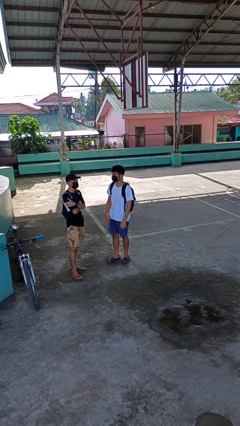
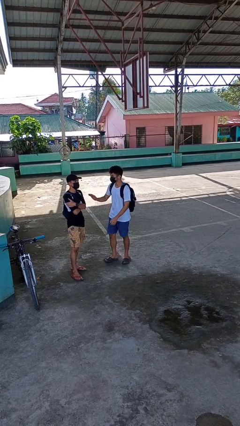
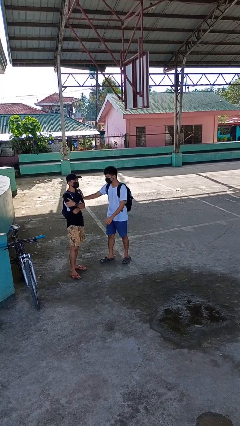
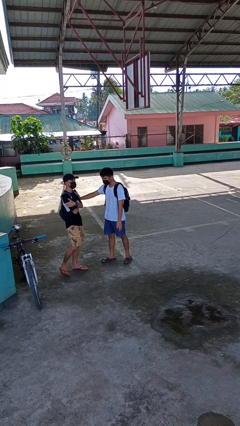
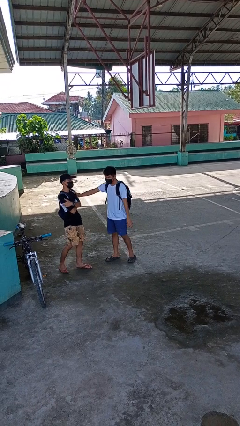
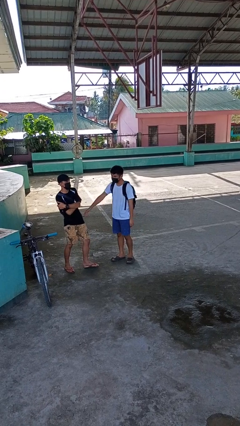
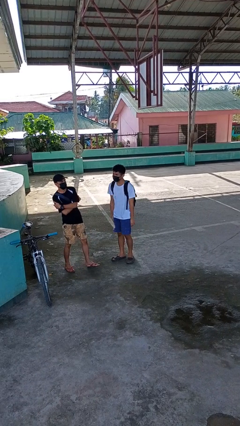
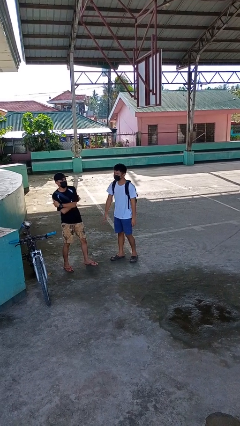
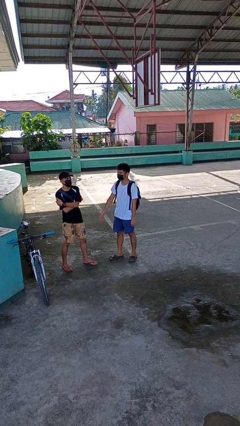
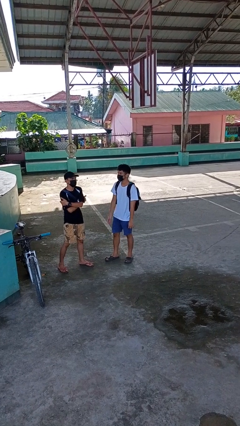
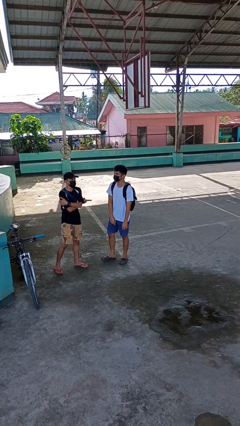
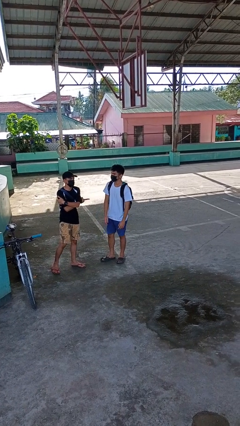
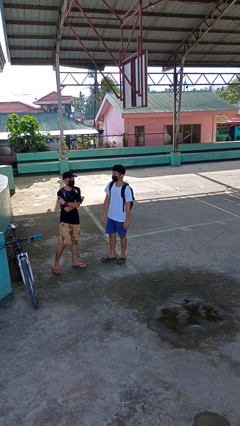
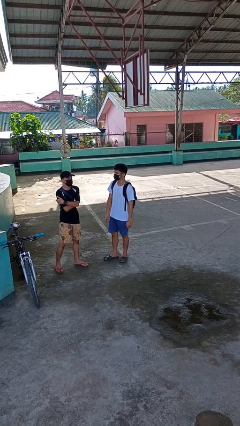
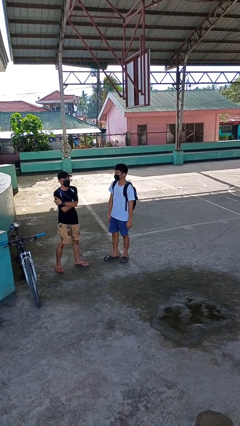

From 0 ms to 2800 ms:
person shoves person

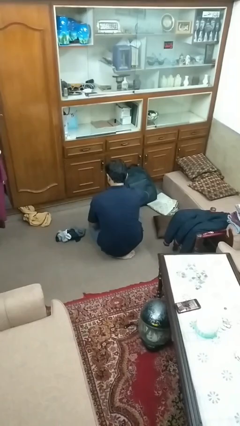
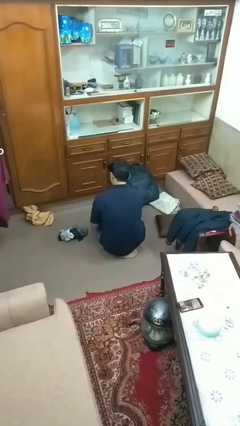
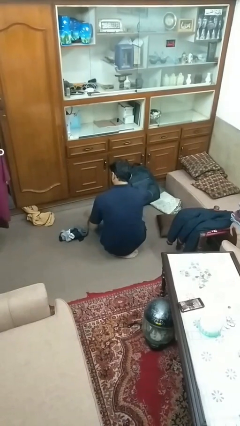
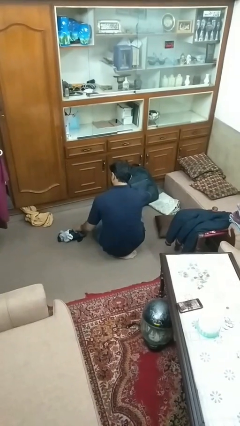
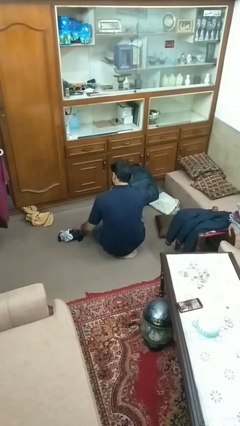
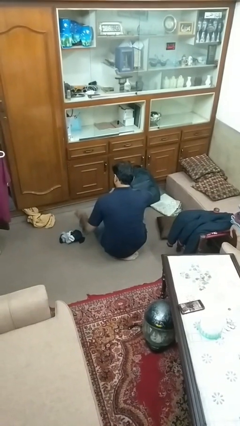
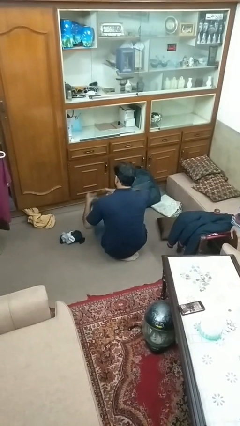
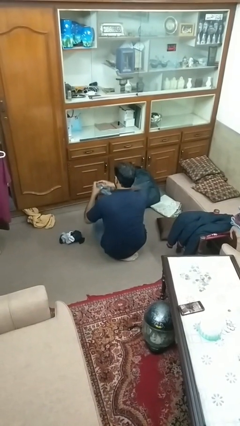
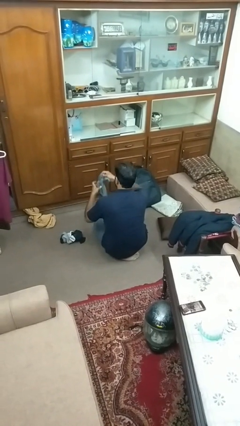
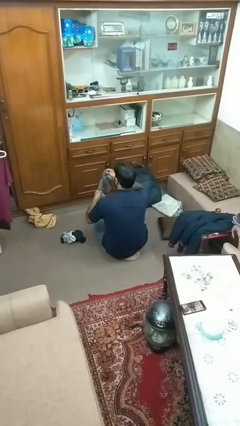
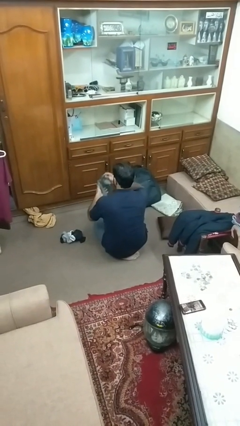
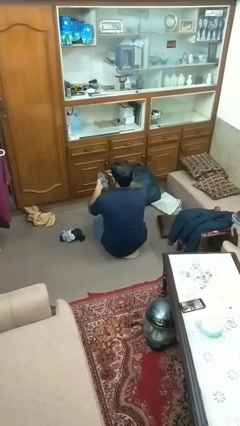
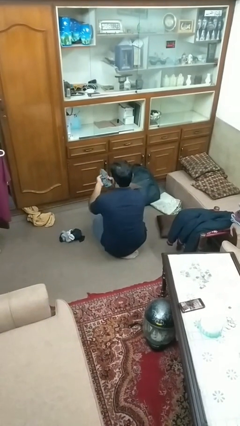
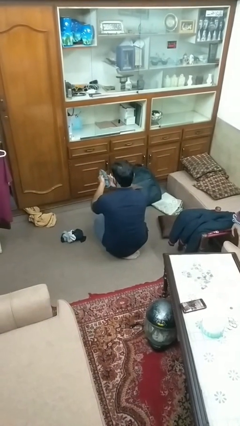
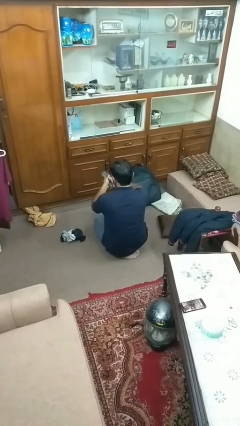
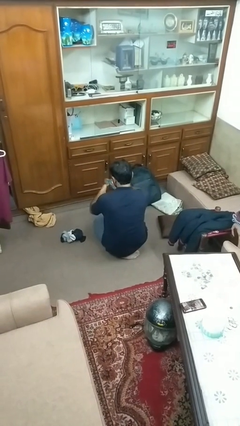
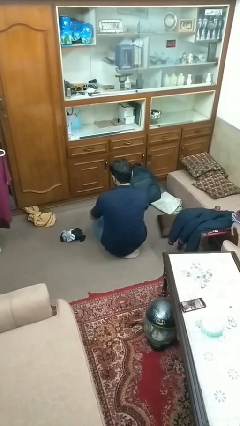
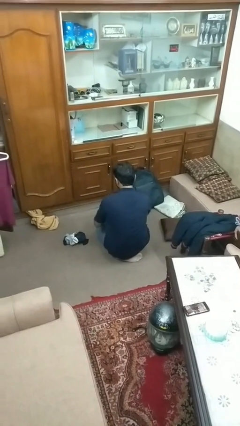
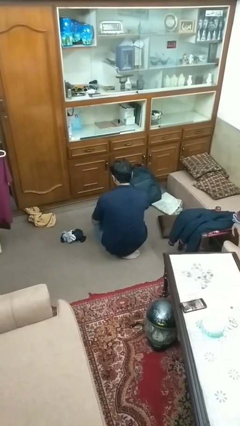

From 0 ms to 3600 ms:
person folds socks

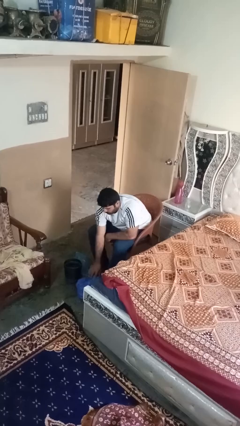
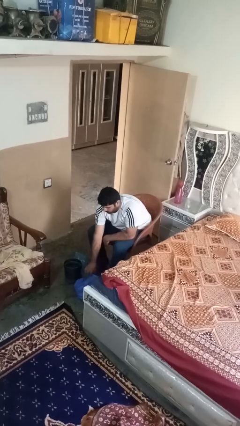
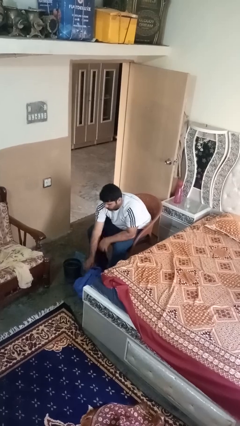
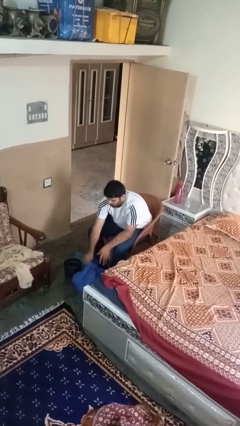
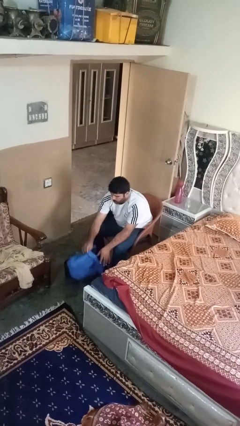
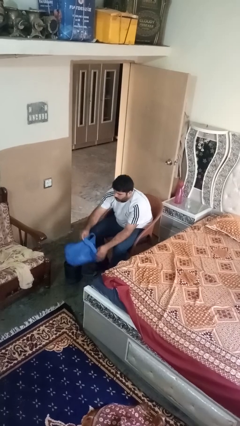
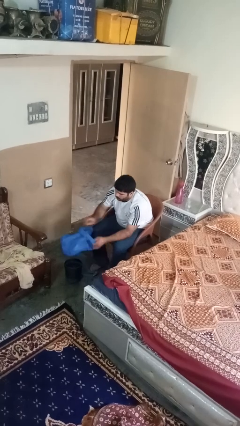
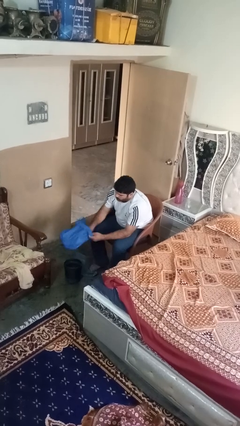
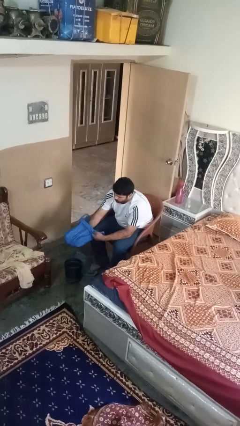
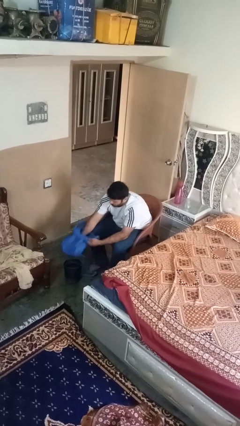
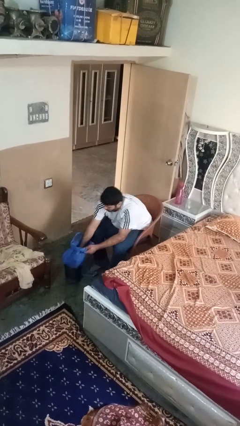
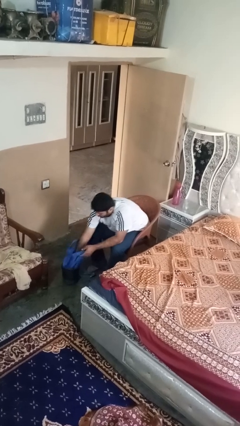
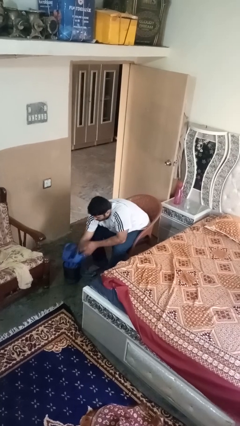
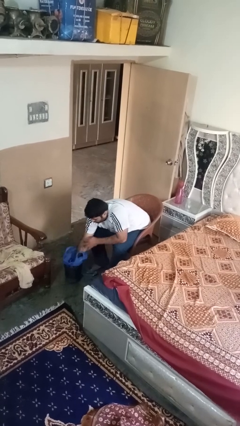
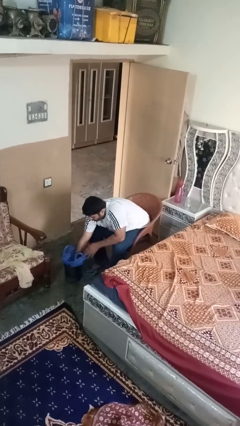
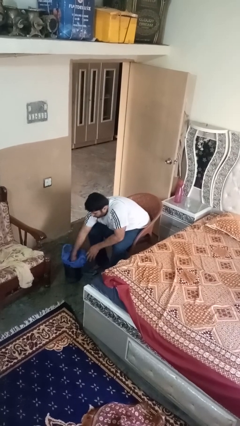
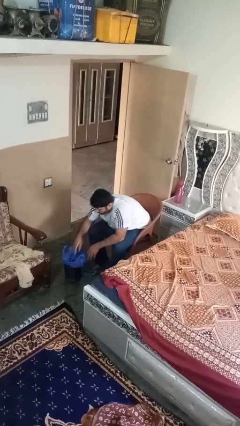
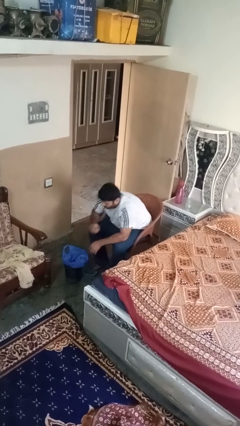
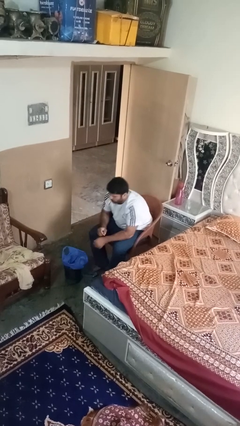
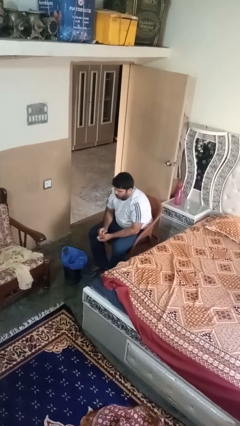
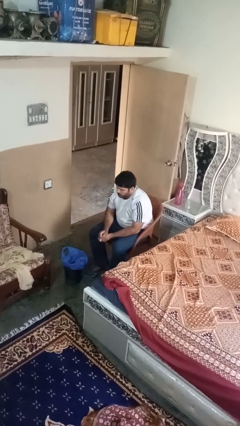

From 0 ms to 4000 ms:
person inserts trashbag into trashcan

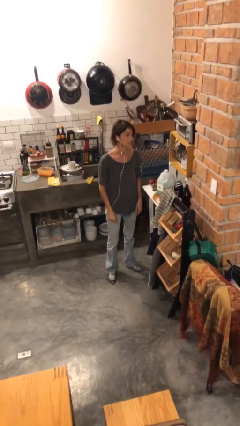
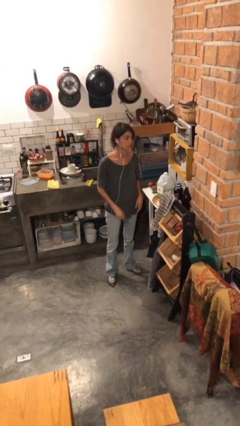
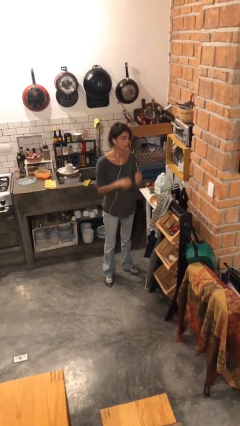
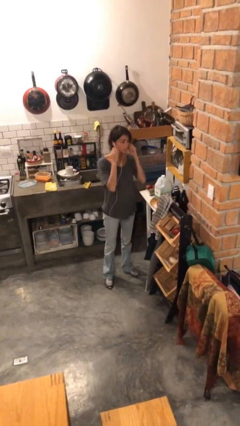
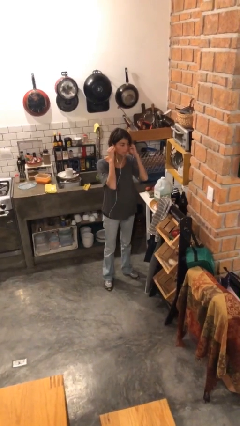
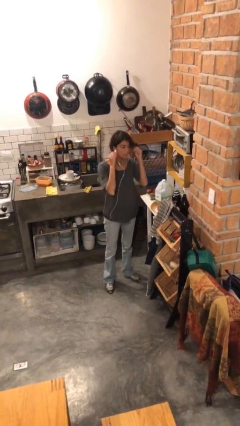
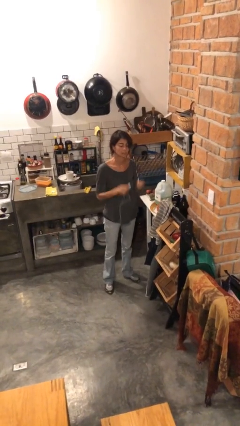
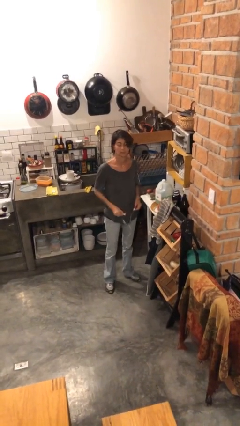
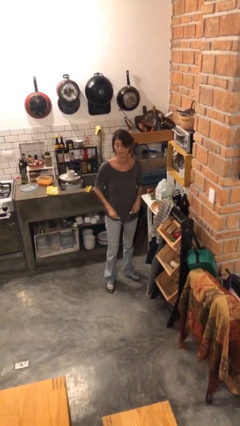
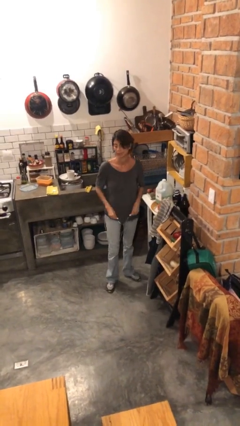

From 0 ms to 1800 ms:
person takes off headphones

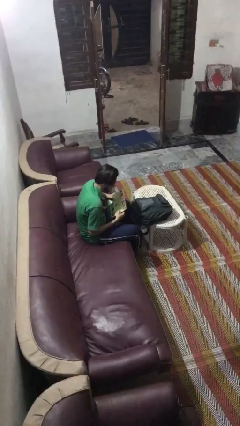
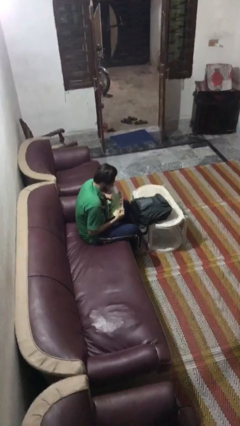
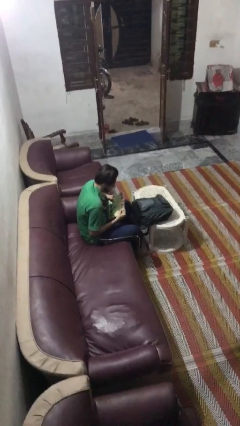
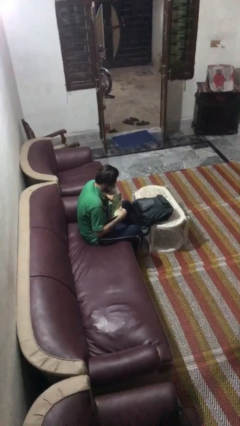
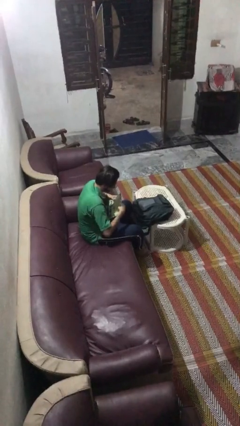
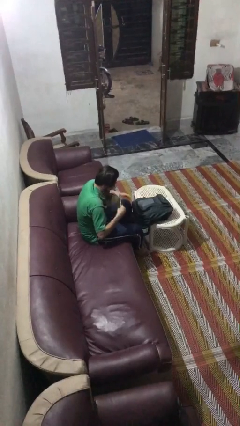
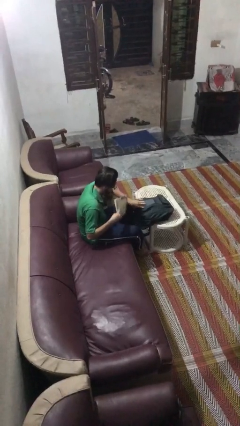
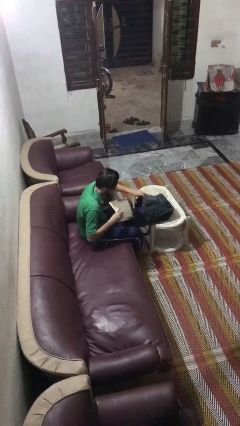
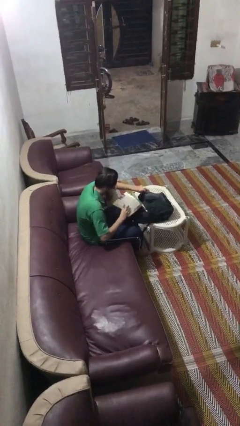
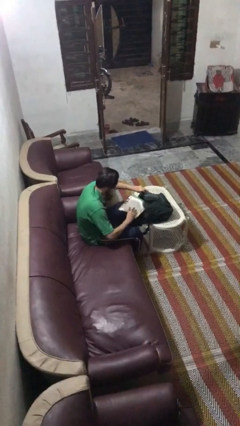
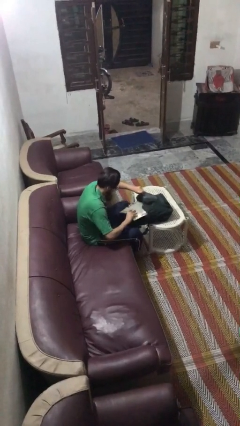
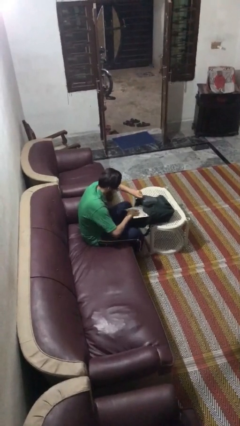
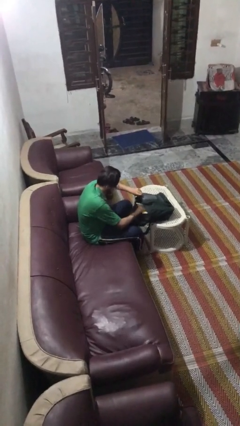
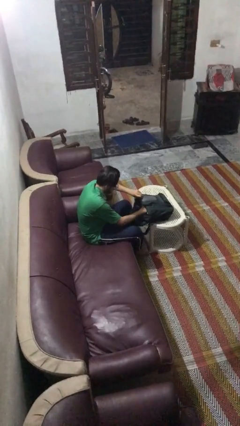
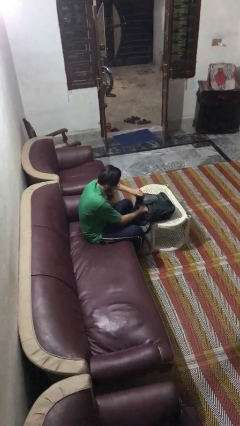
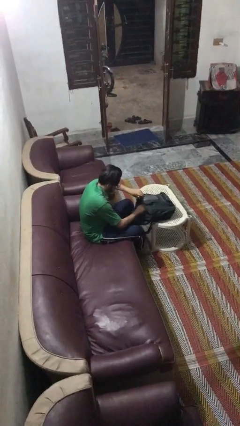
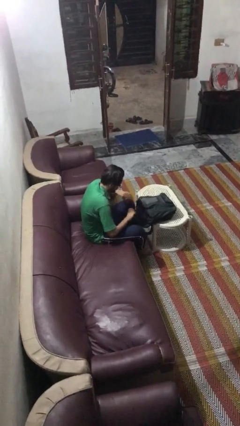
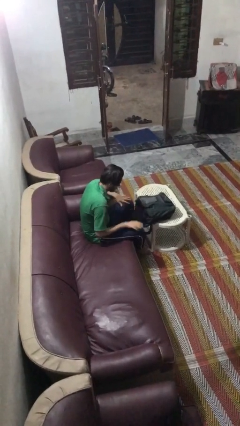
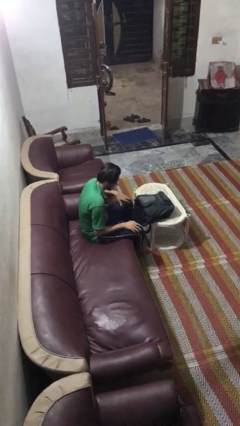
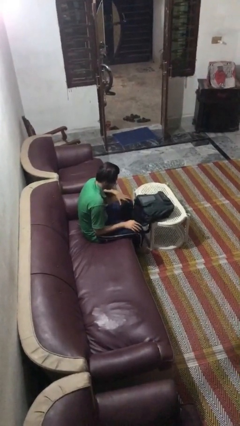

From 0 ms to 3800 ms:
person puts object into backpack

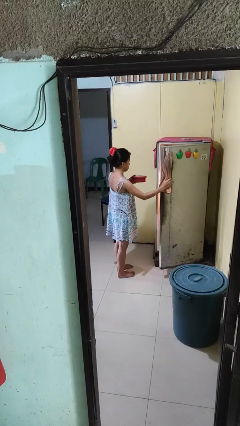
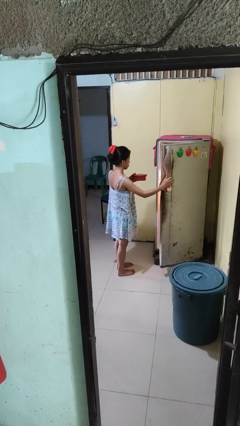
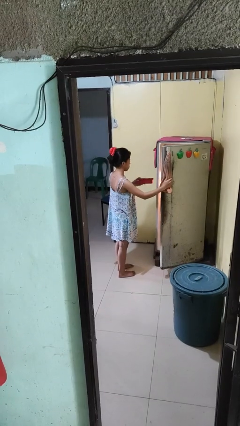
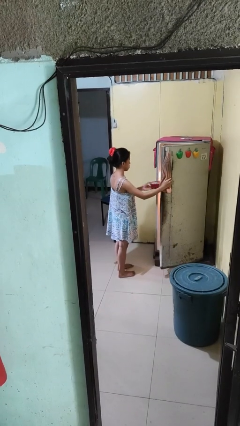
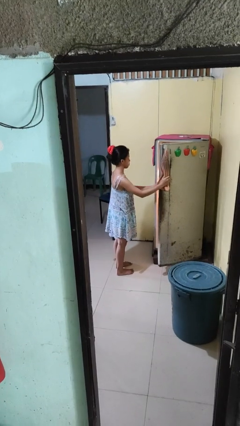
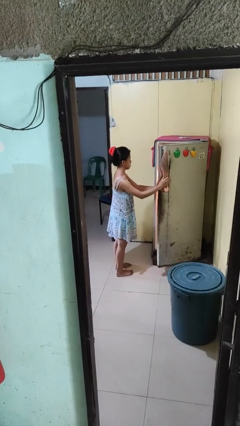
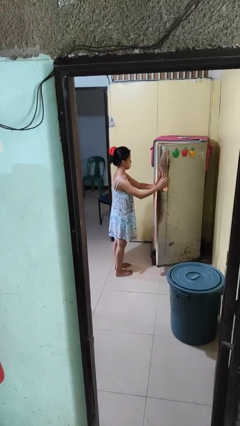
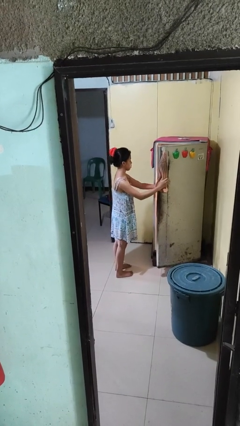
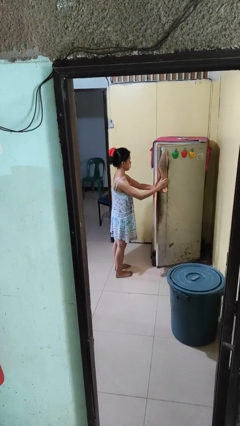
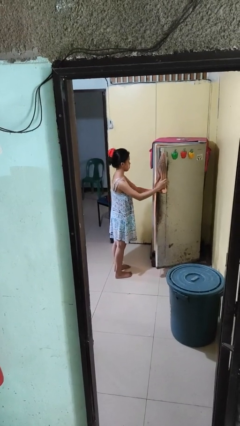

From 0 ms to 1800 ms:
person puts object into refrigerator
